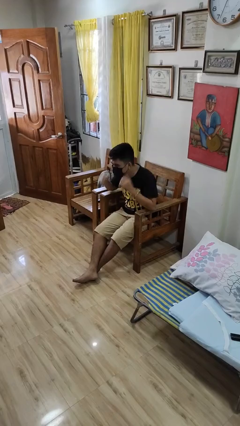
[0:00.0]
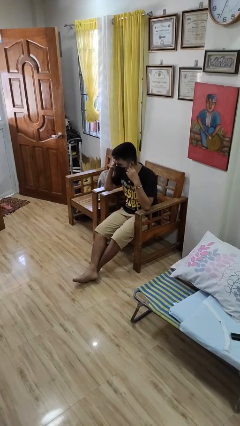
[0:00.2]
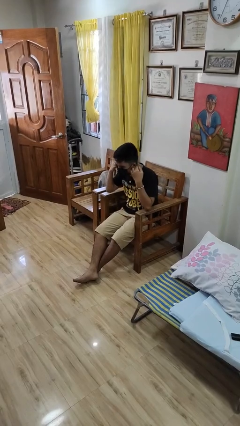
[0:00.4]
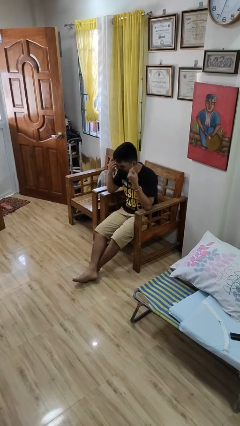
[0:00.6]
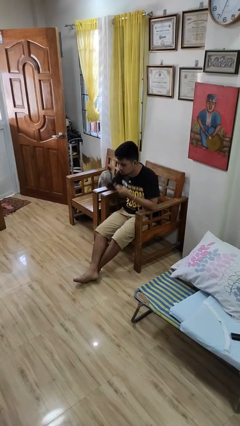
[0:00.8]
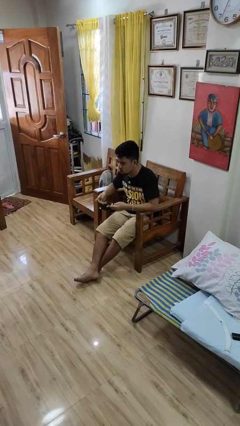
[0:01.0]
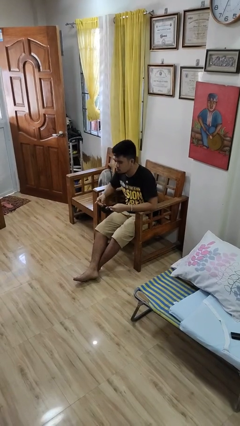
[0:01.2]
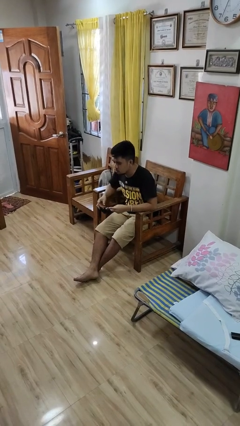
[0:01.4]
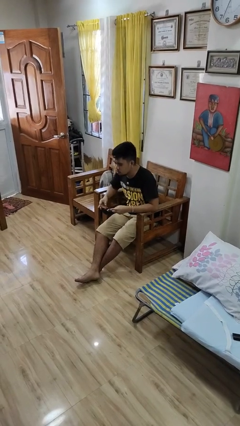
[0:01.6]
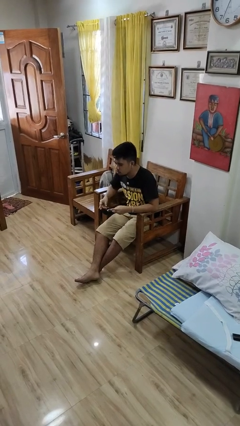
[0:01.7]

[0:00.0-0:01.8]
person takes off facemask

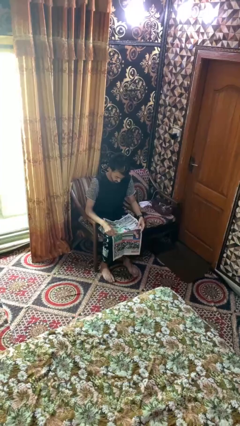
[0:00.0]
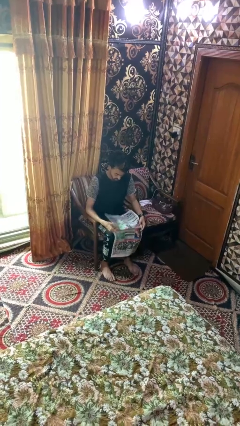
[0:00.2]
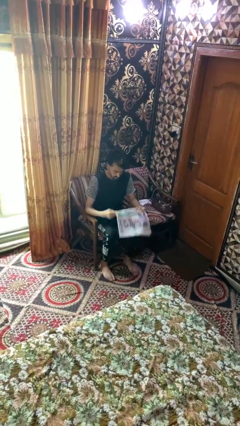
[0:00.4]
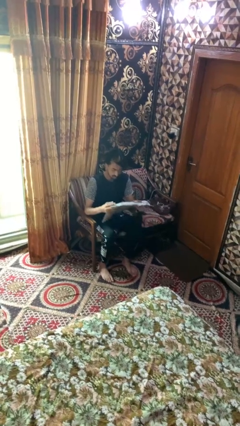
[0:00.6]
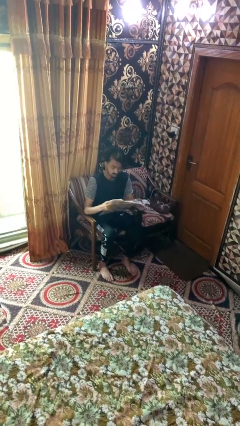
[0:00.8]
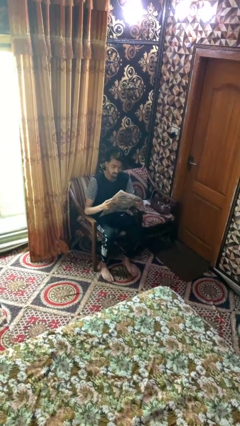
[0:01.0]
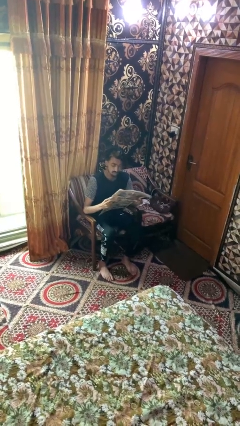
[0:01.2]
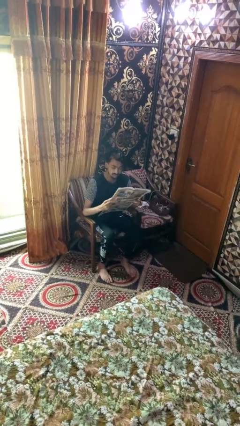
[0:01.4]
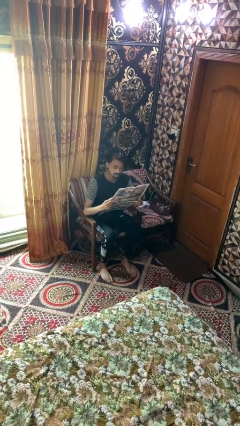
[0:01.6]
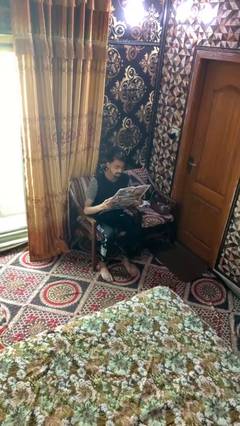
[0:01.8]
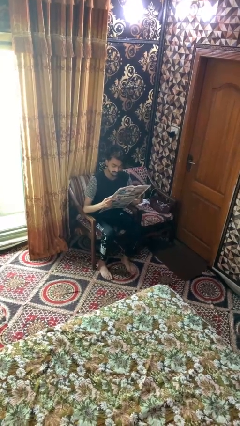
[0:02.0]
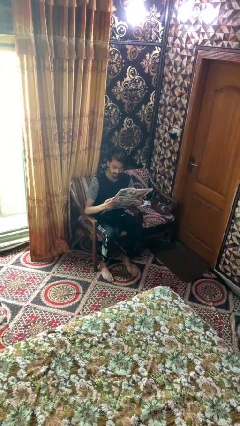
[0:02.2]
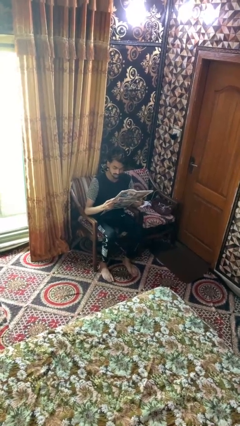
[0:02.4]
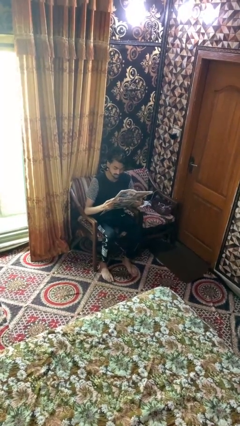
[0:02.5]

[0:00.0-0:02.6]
person reads newspaper

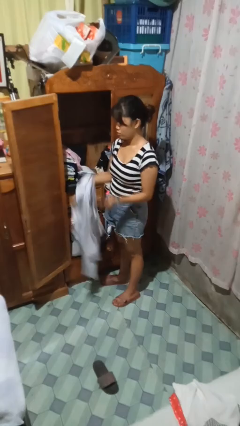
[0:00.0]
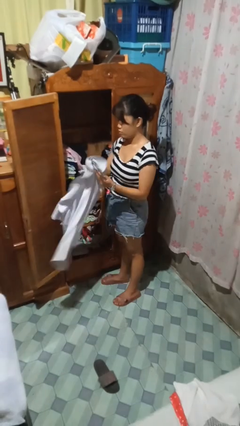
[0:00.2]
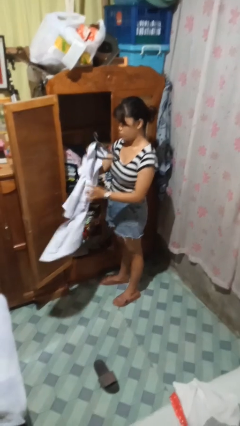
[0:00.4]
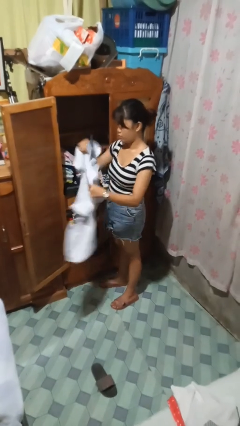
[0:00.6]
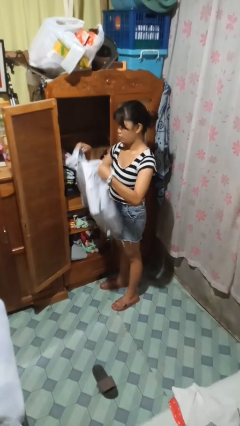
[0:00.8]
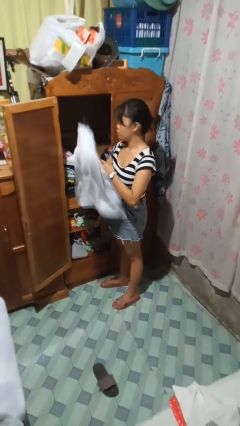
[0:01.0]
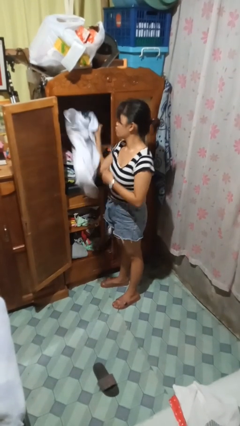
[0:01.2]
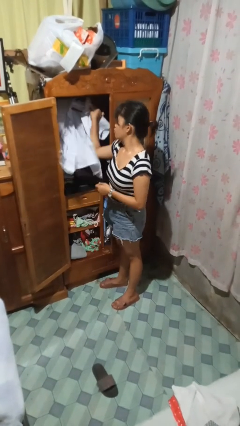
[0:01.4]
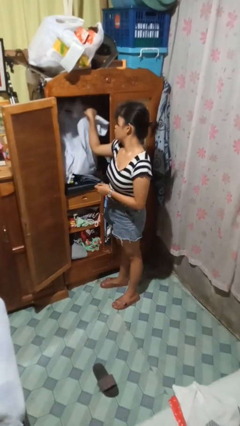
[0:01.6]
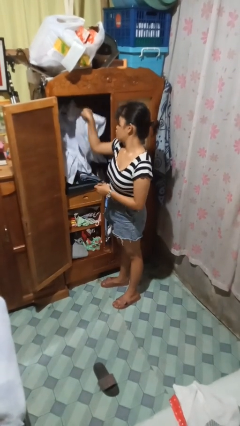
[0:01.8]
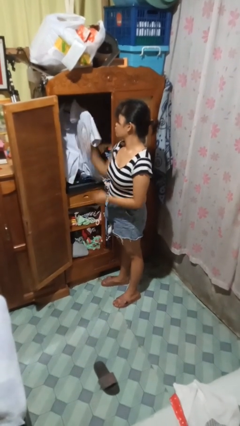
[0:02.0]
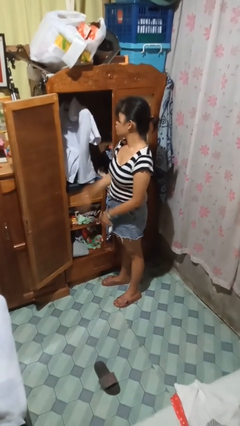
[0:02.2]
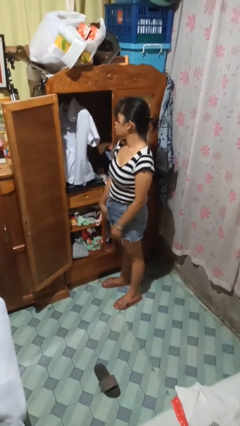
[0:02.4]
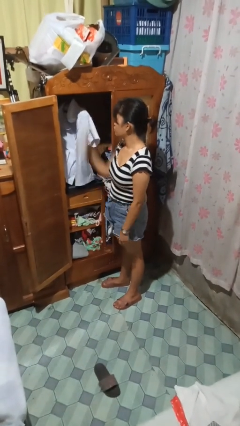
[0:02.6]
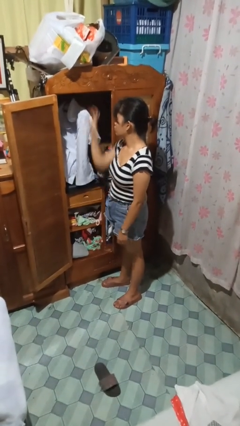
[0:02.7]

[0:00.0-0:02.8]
person puts clothes into closet

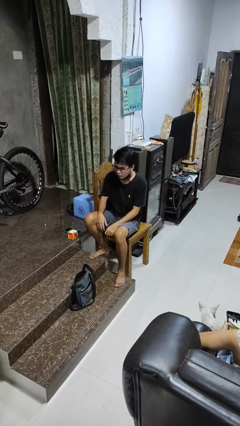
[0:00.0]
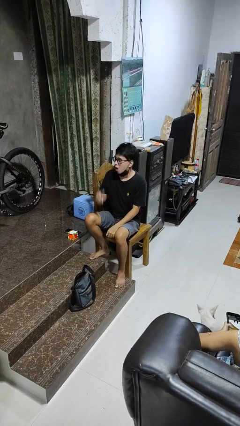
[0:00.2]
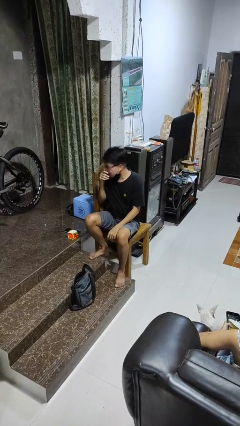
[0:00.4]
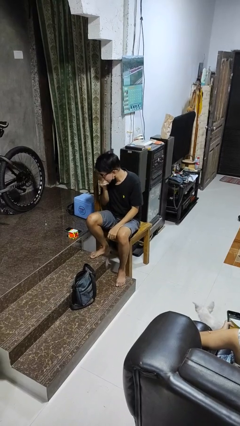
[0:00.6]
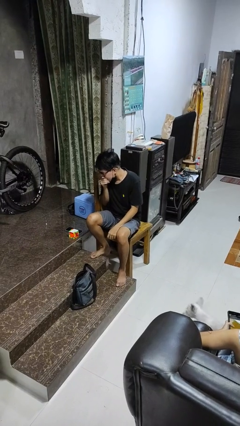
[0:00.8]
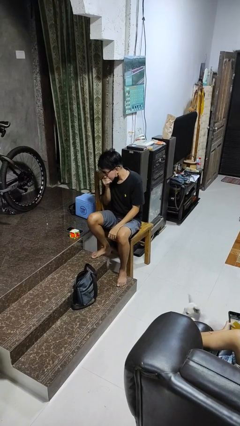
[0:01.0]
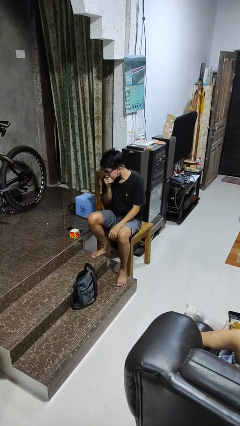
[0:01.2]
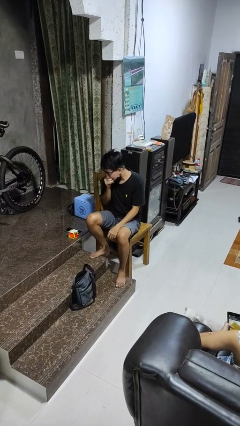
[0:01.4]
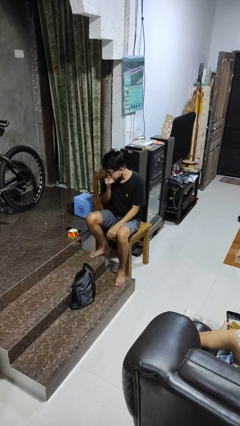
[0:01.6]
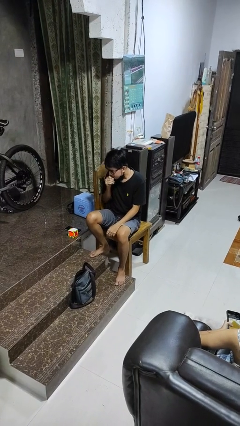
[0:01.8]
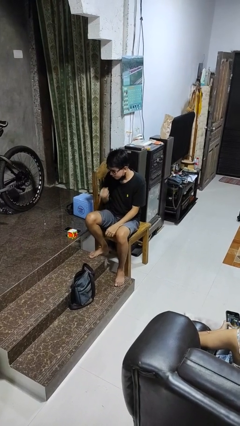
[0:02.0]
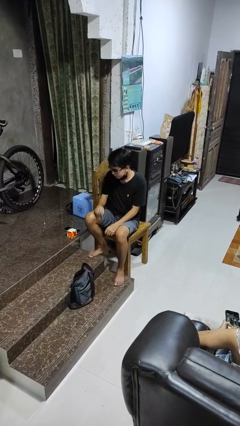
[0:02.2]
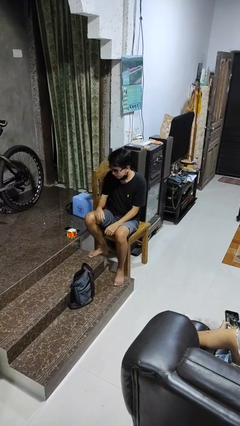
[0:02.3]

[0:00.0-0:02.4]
person sneezes into hand

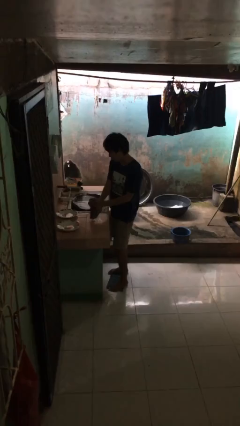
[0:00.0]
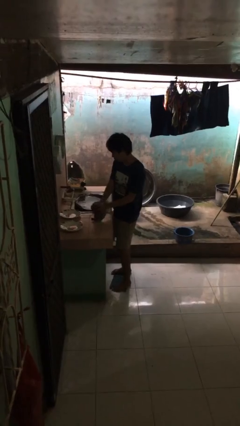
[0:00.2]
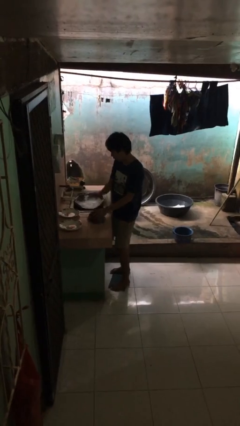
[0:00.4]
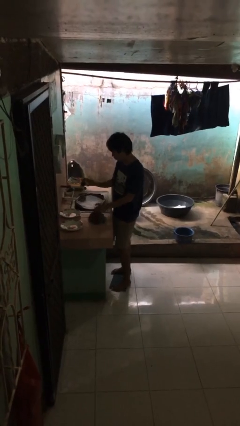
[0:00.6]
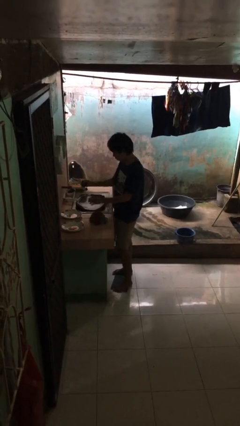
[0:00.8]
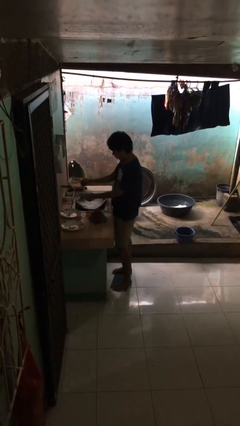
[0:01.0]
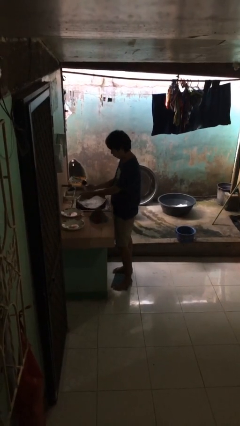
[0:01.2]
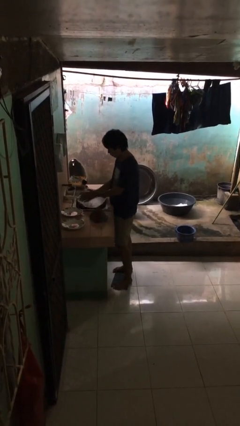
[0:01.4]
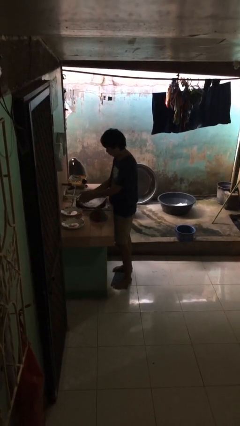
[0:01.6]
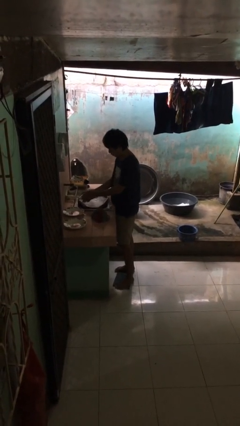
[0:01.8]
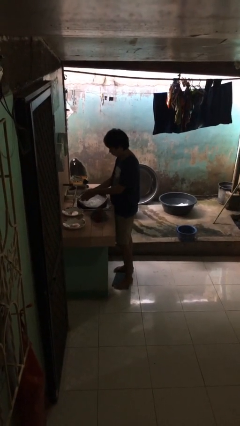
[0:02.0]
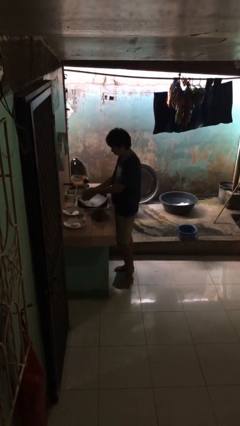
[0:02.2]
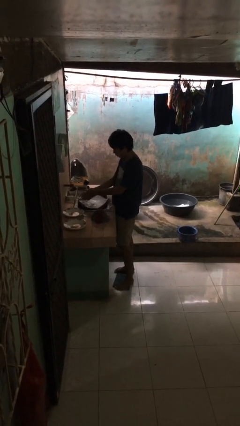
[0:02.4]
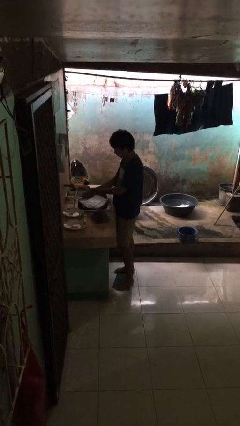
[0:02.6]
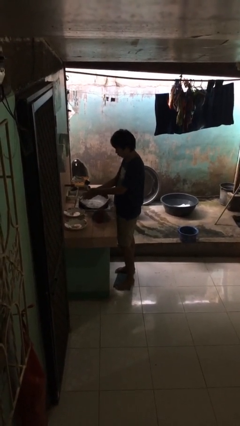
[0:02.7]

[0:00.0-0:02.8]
person washes hands

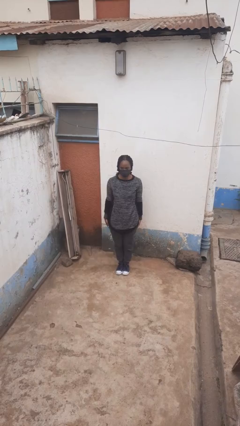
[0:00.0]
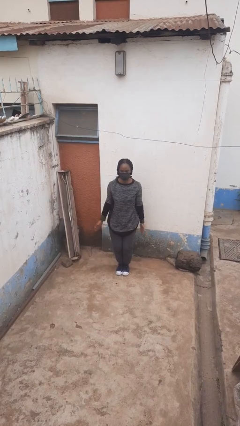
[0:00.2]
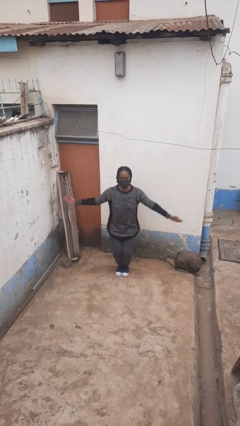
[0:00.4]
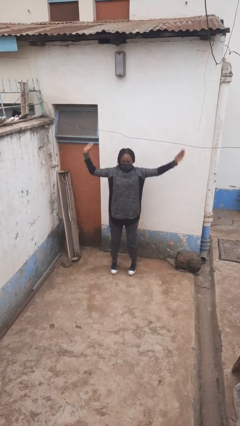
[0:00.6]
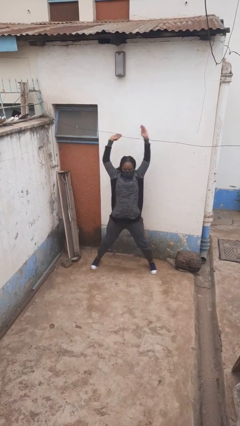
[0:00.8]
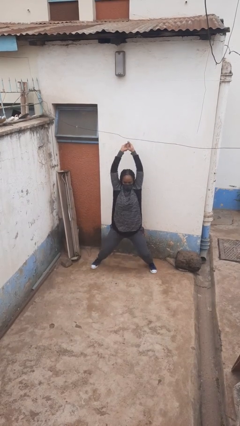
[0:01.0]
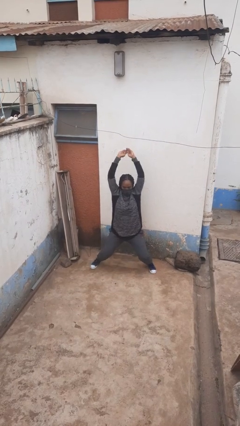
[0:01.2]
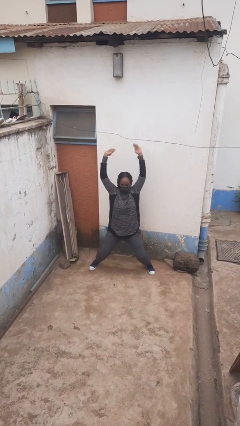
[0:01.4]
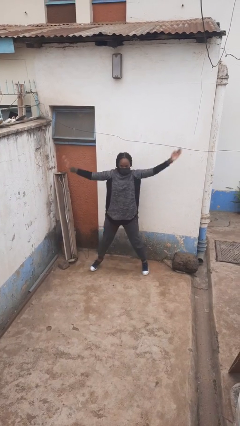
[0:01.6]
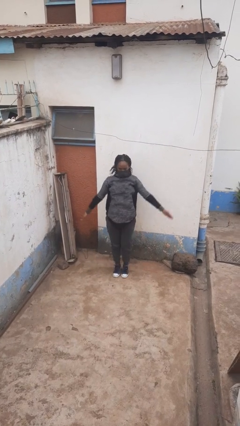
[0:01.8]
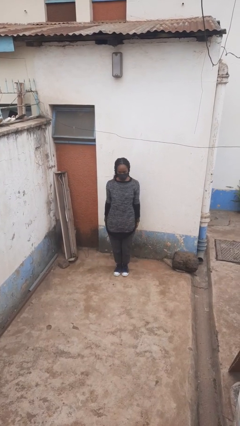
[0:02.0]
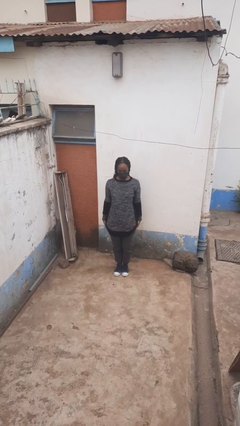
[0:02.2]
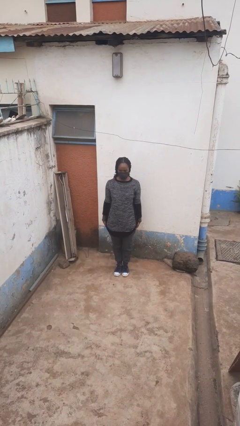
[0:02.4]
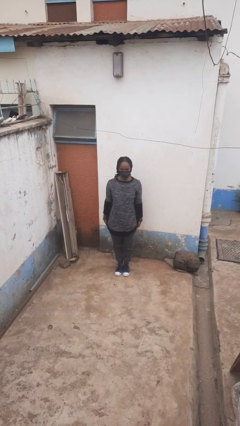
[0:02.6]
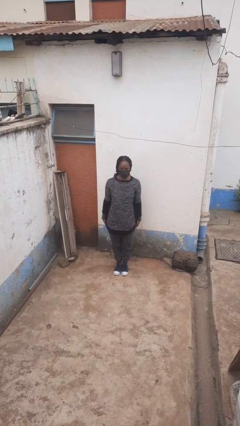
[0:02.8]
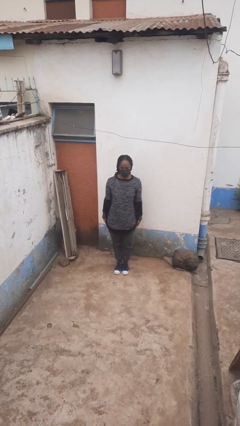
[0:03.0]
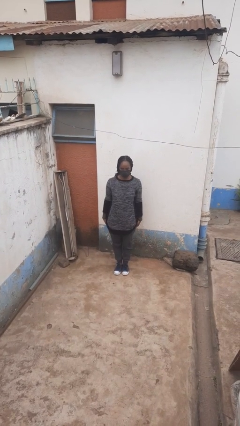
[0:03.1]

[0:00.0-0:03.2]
person exercises with jumping jacks

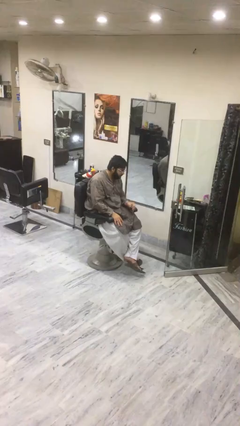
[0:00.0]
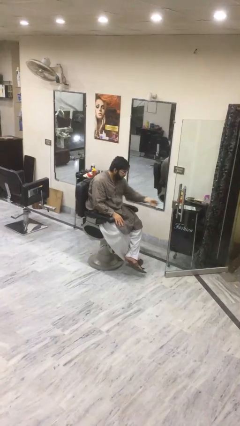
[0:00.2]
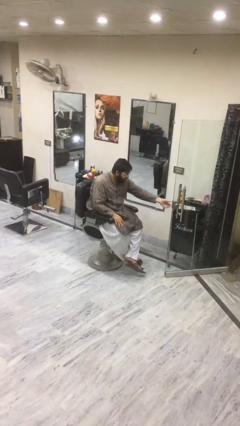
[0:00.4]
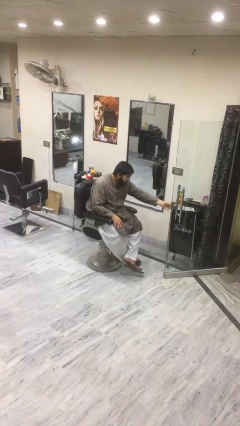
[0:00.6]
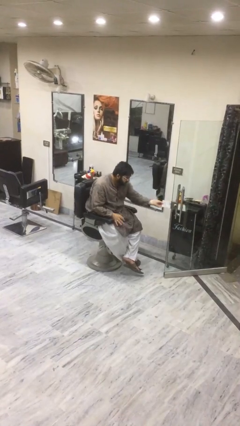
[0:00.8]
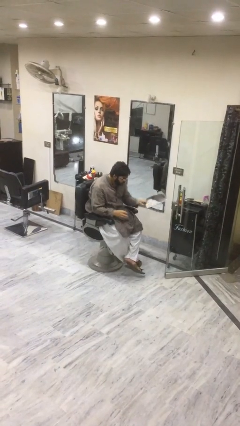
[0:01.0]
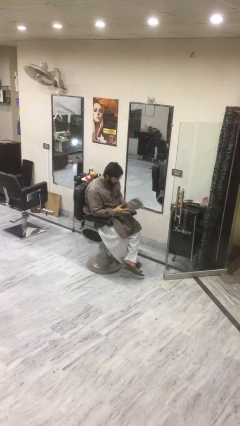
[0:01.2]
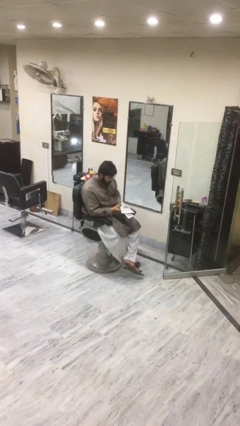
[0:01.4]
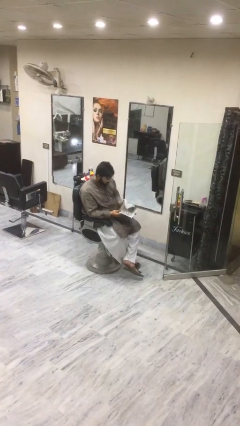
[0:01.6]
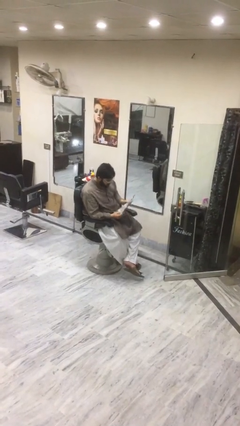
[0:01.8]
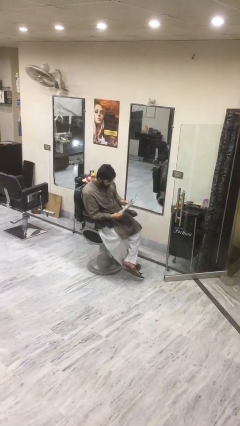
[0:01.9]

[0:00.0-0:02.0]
person picks up object from table
